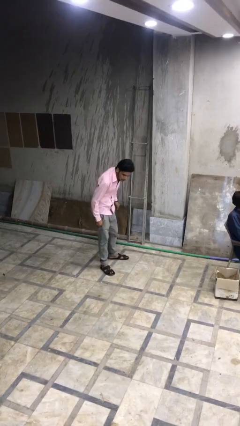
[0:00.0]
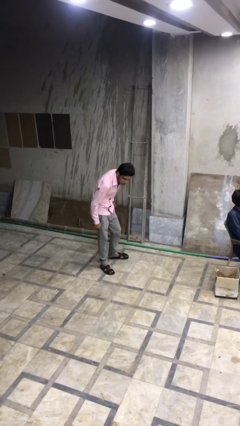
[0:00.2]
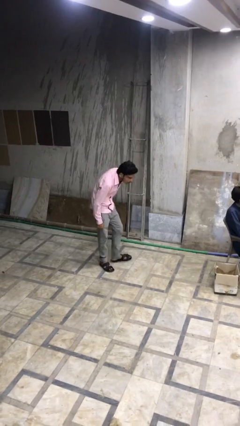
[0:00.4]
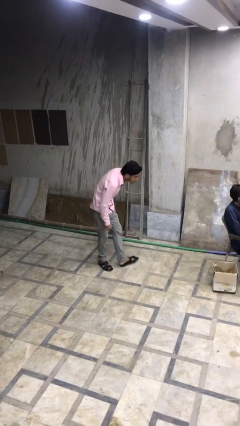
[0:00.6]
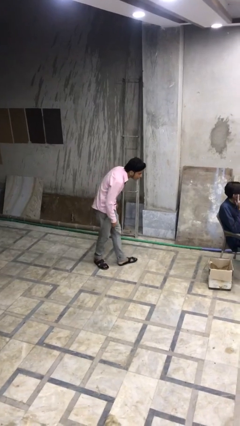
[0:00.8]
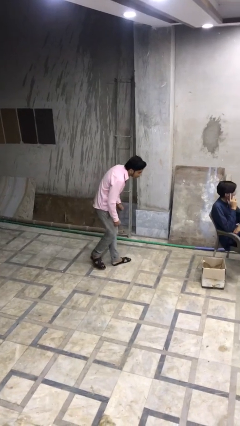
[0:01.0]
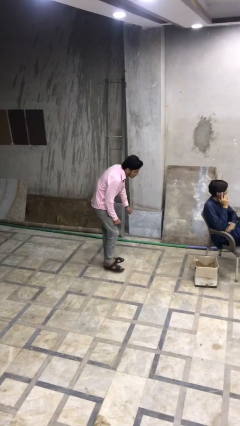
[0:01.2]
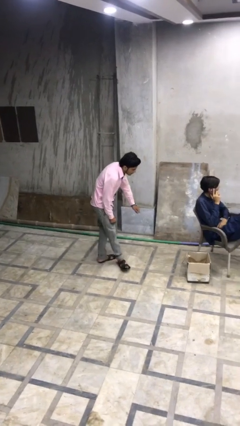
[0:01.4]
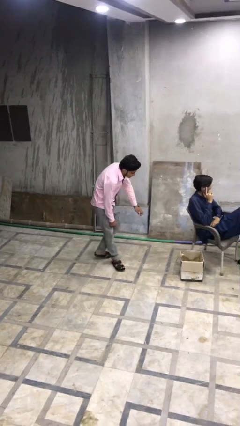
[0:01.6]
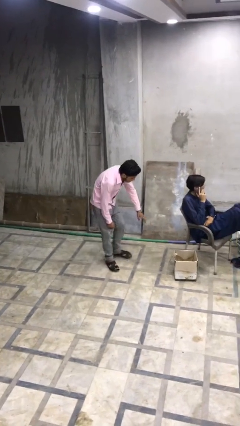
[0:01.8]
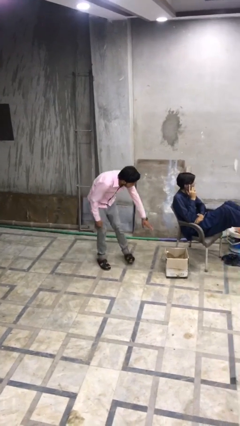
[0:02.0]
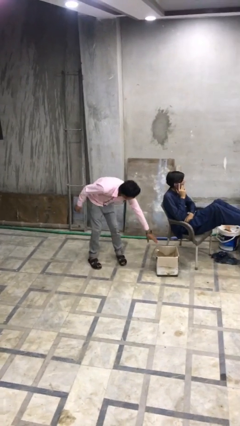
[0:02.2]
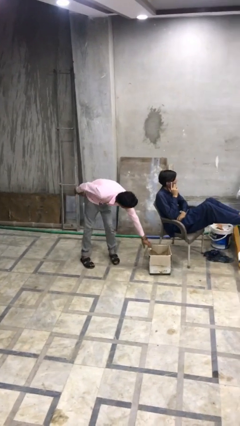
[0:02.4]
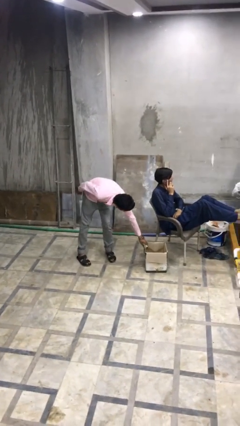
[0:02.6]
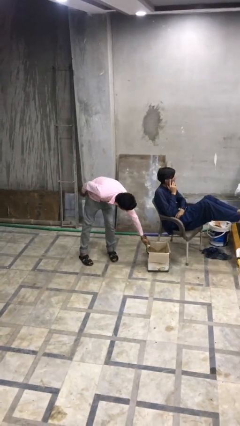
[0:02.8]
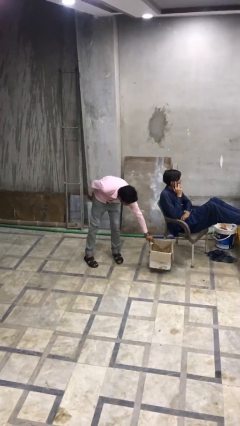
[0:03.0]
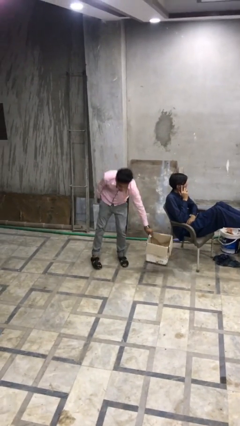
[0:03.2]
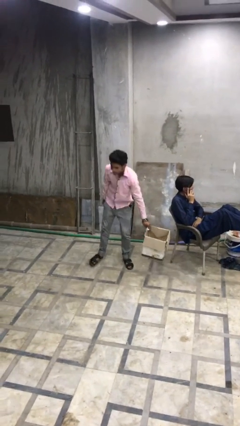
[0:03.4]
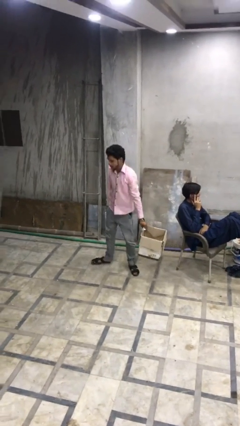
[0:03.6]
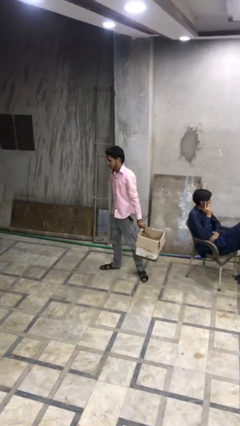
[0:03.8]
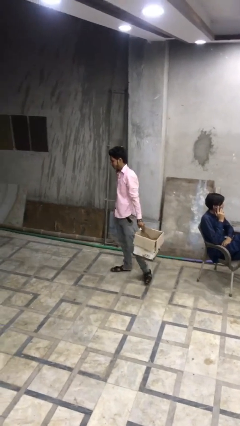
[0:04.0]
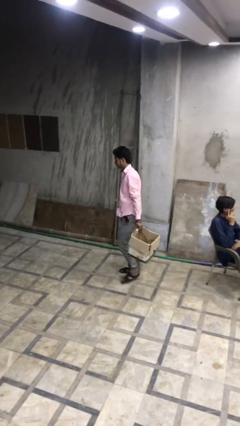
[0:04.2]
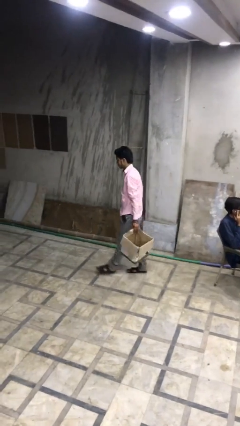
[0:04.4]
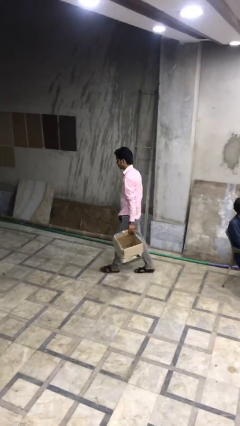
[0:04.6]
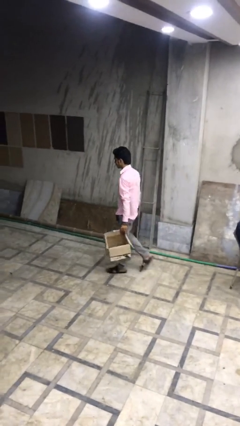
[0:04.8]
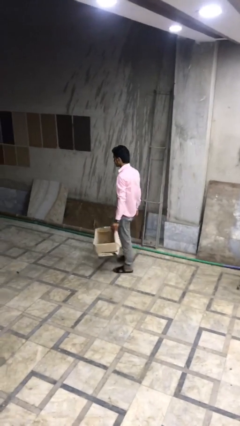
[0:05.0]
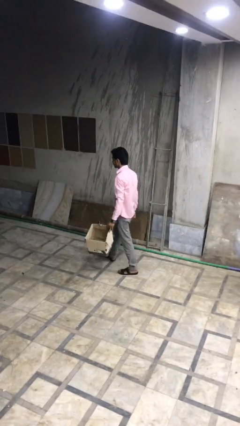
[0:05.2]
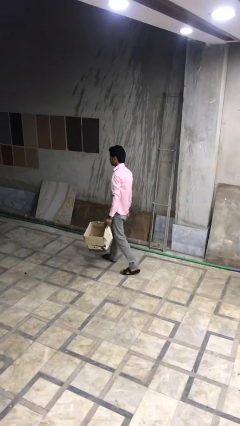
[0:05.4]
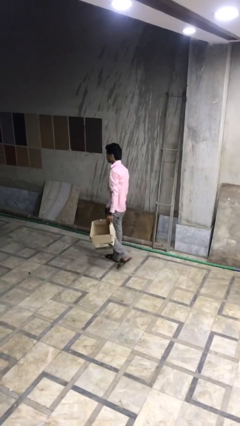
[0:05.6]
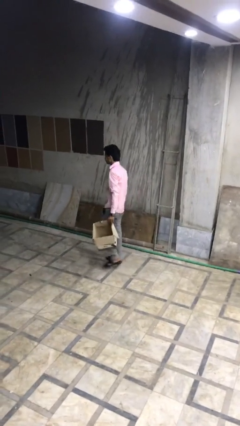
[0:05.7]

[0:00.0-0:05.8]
person steals object from person

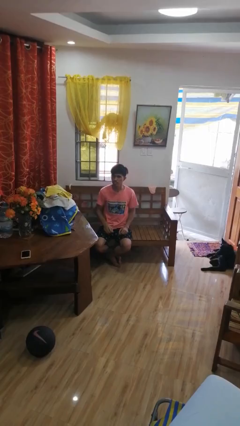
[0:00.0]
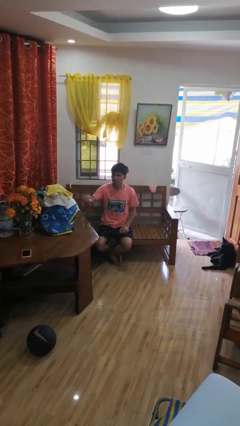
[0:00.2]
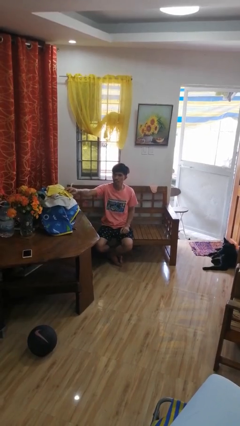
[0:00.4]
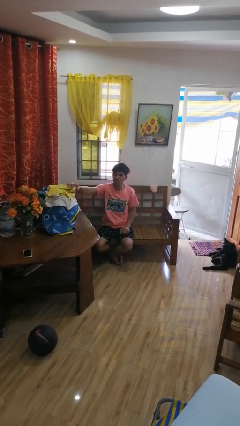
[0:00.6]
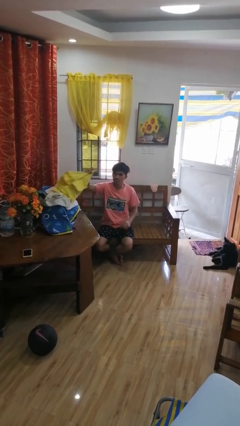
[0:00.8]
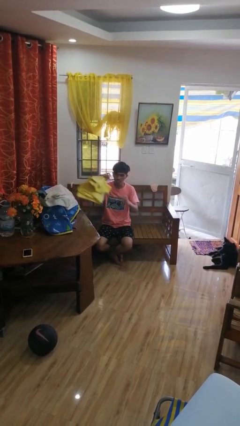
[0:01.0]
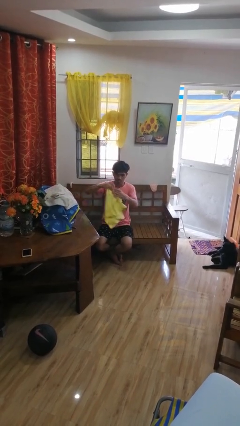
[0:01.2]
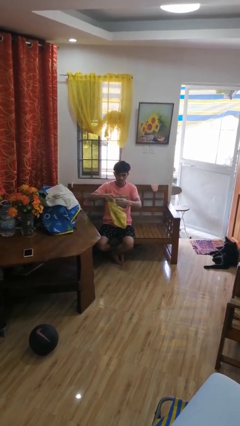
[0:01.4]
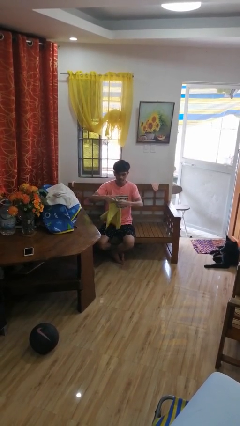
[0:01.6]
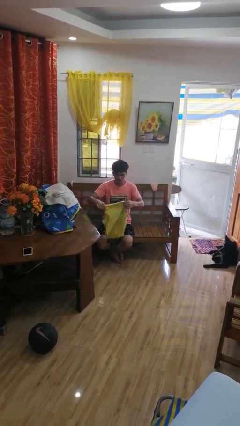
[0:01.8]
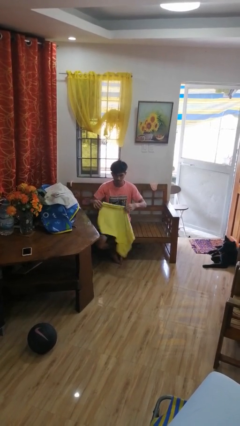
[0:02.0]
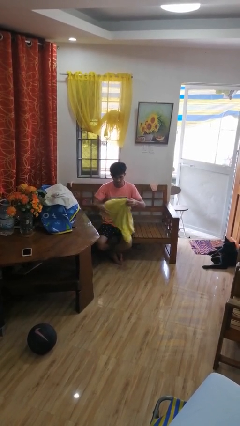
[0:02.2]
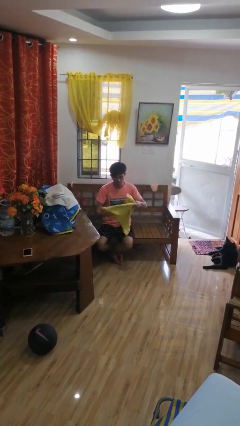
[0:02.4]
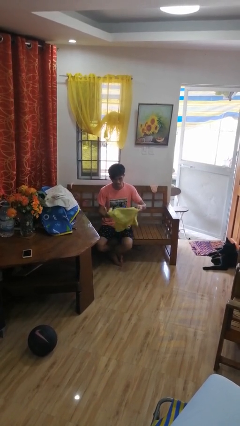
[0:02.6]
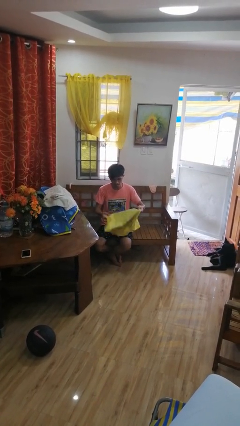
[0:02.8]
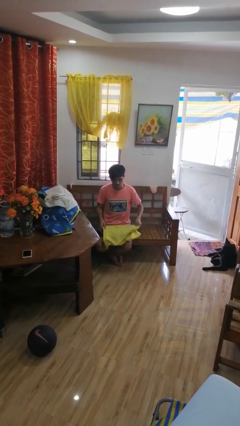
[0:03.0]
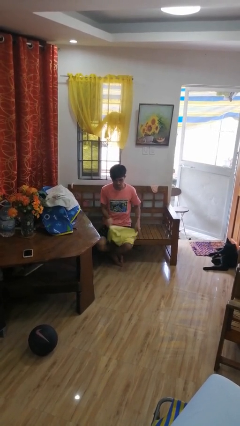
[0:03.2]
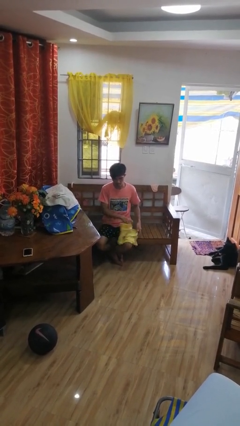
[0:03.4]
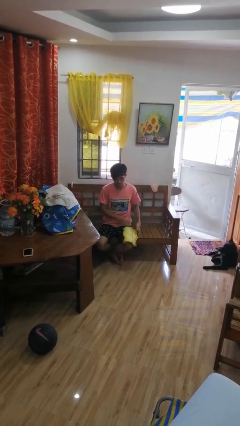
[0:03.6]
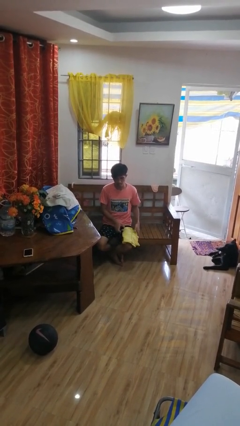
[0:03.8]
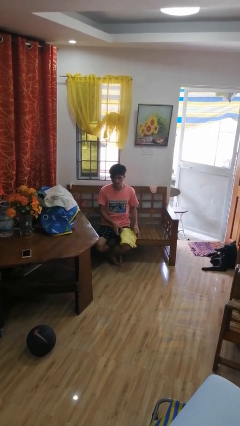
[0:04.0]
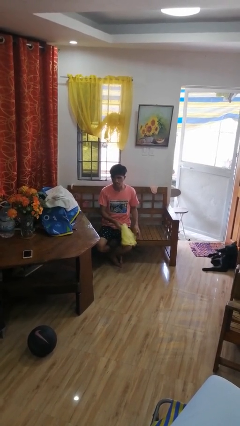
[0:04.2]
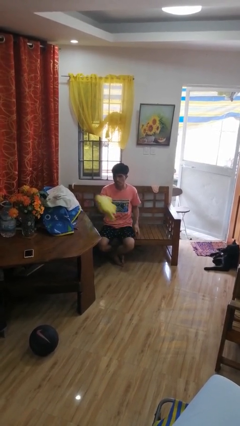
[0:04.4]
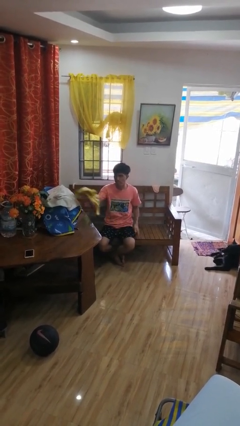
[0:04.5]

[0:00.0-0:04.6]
person folds shirt

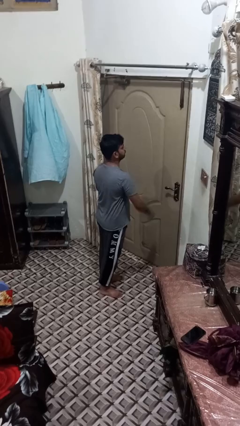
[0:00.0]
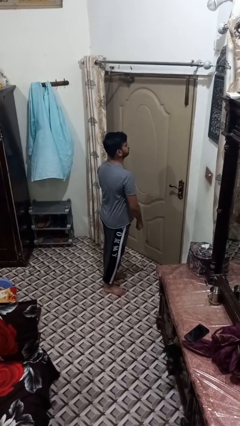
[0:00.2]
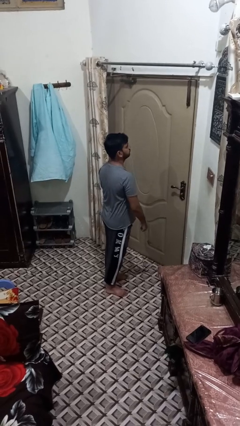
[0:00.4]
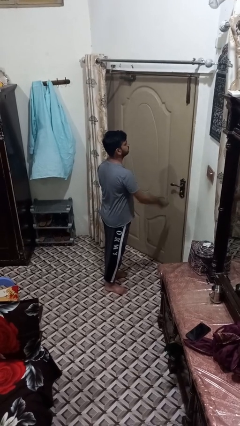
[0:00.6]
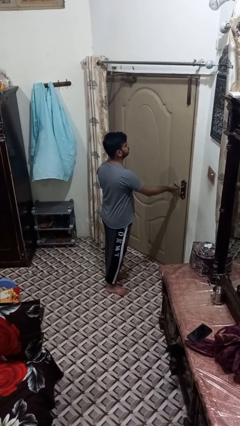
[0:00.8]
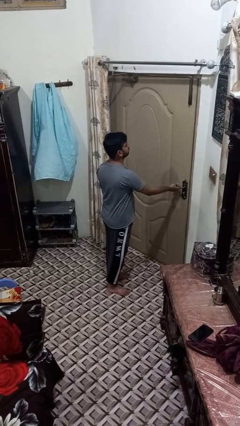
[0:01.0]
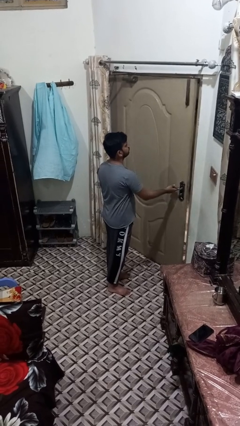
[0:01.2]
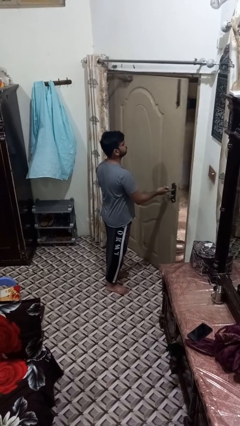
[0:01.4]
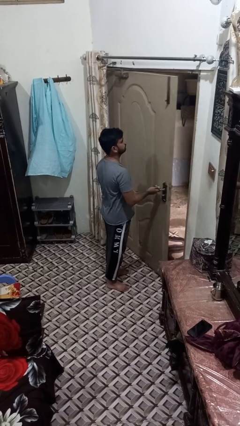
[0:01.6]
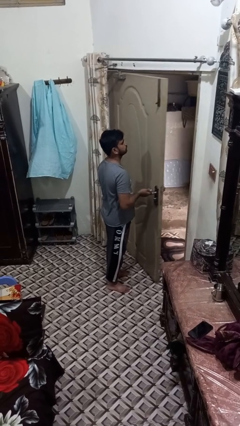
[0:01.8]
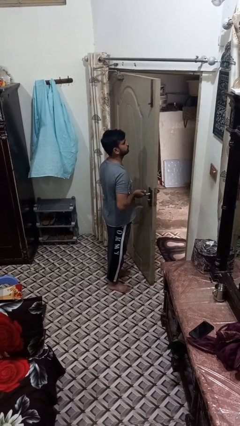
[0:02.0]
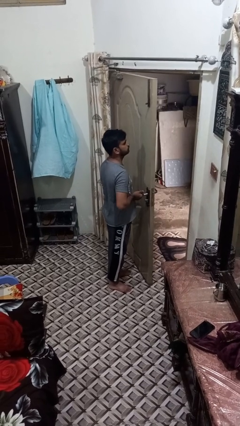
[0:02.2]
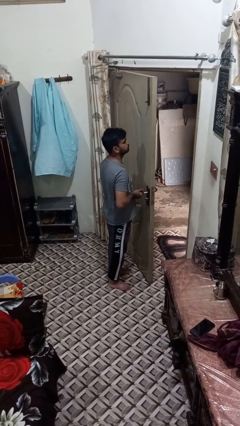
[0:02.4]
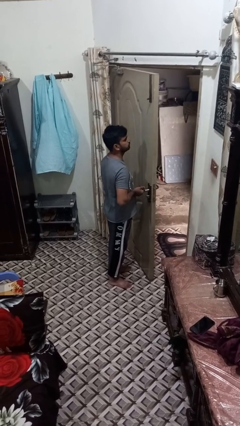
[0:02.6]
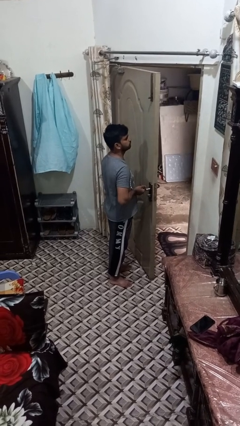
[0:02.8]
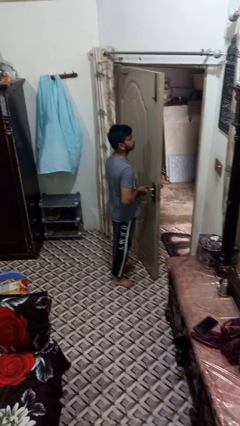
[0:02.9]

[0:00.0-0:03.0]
person opens facility door

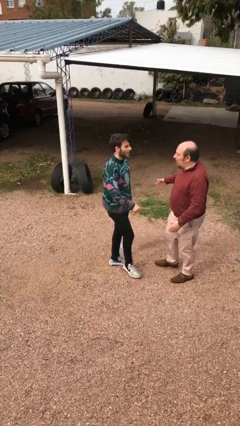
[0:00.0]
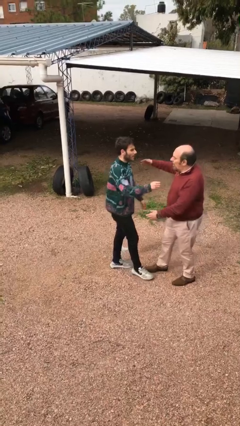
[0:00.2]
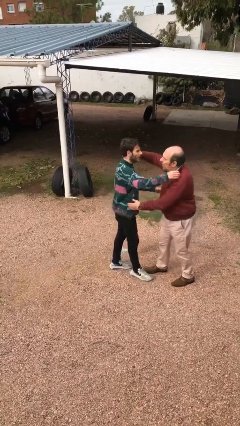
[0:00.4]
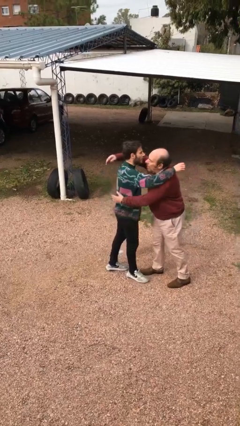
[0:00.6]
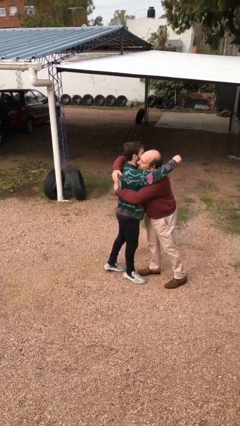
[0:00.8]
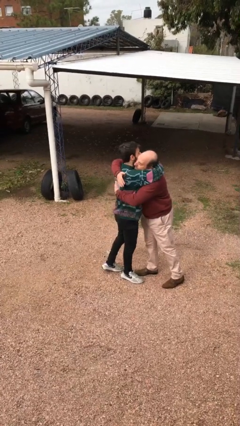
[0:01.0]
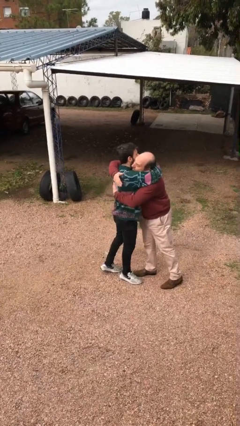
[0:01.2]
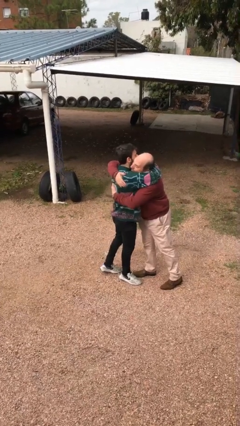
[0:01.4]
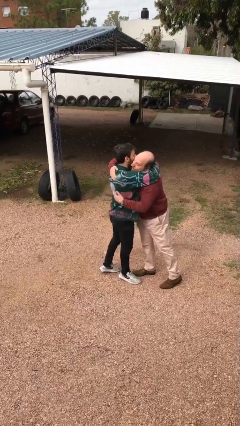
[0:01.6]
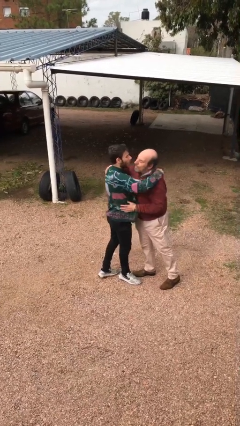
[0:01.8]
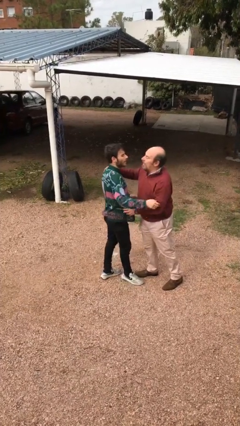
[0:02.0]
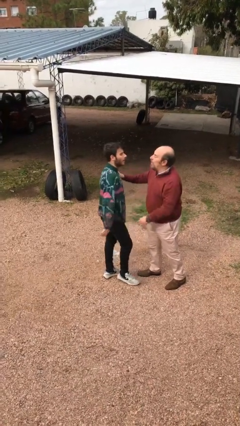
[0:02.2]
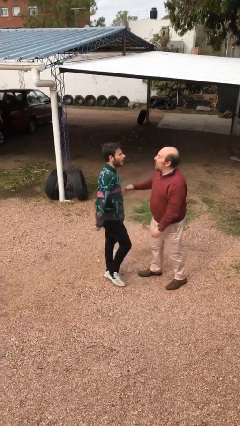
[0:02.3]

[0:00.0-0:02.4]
person embraces person

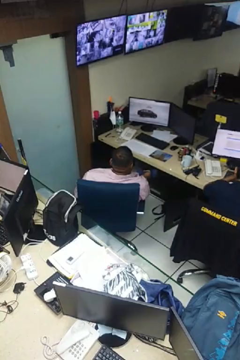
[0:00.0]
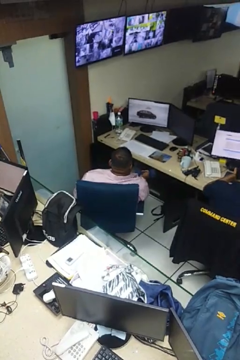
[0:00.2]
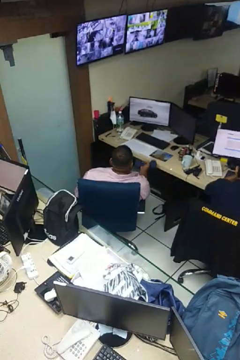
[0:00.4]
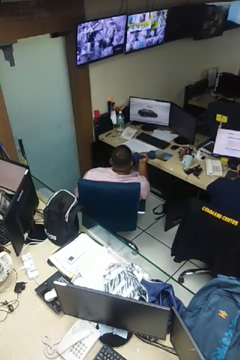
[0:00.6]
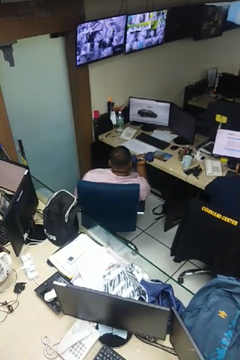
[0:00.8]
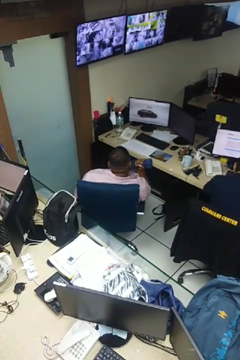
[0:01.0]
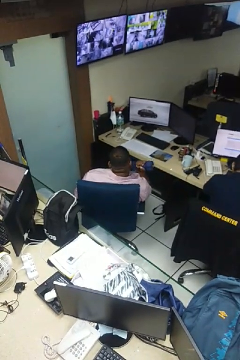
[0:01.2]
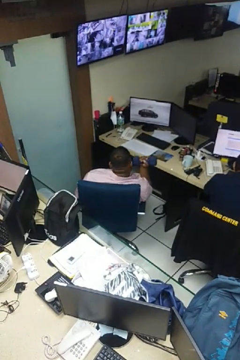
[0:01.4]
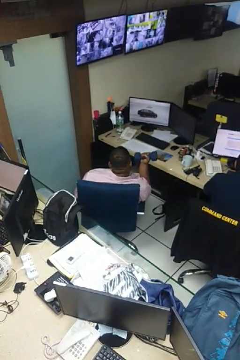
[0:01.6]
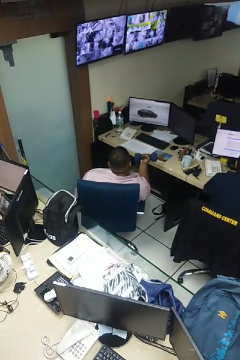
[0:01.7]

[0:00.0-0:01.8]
person lifts dumbbells
